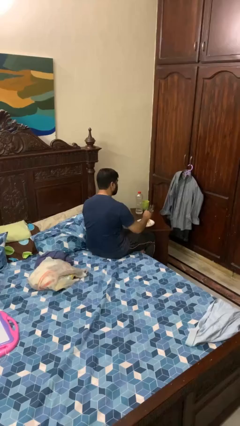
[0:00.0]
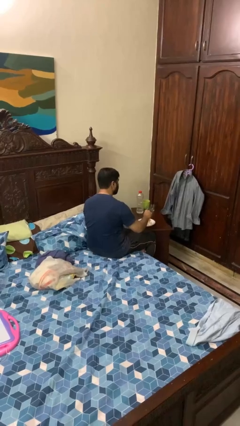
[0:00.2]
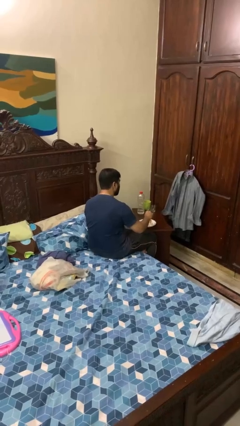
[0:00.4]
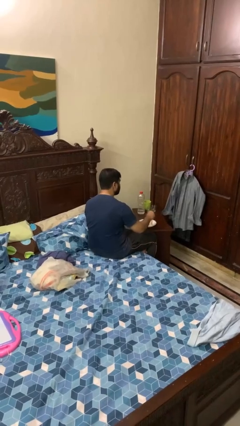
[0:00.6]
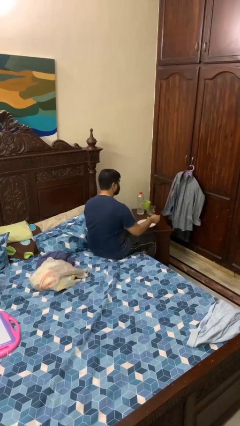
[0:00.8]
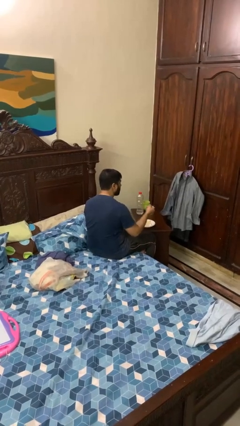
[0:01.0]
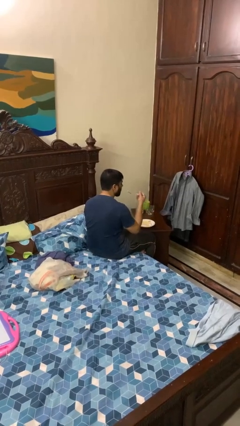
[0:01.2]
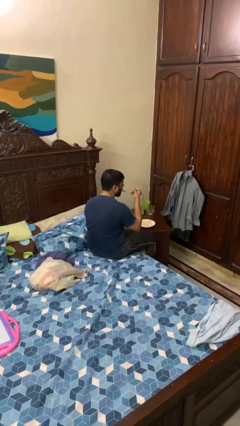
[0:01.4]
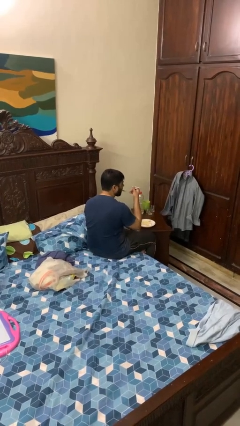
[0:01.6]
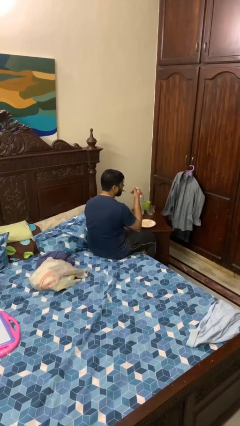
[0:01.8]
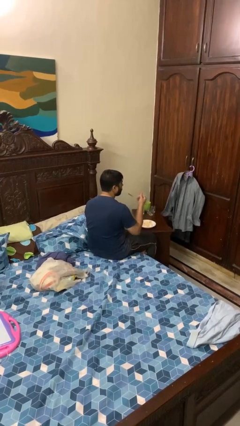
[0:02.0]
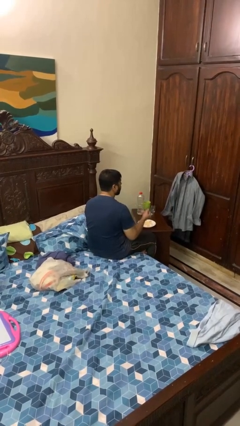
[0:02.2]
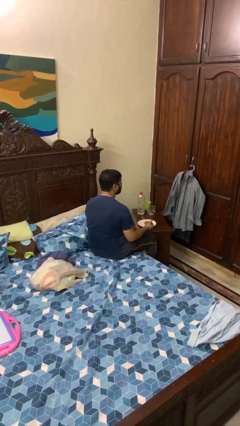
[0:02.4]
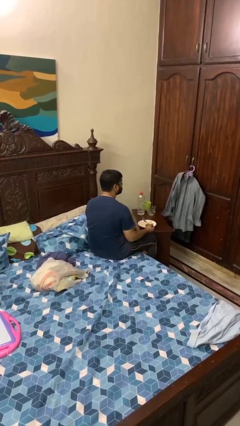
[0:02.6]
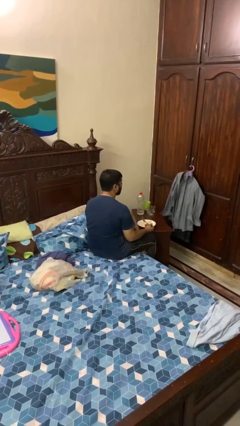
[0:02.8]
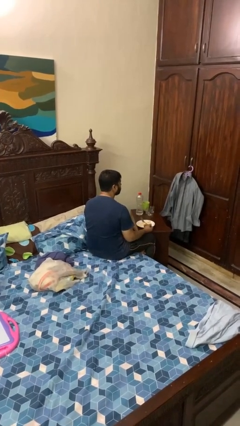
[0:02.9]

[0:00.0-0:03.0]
person eats with utensil

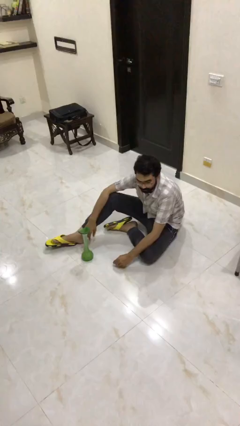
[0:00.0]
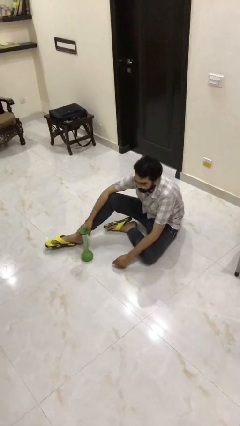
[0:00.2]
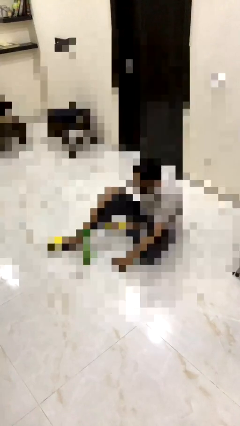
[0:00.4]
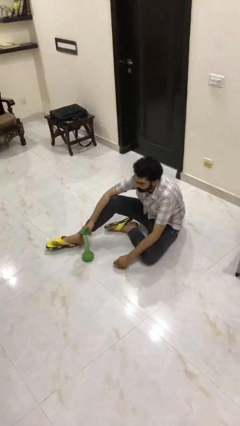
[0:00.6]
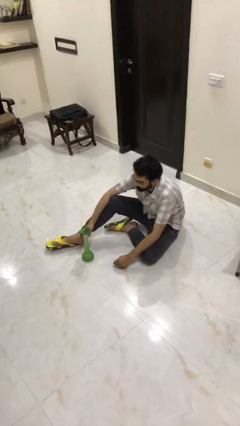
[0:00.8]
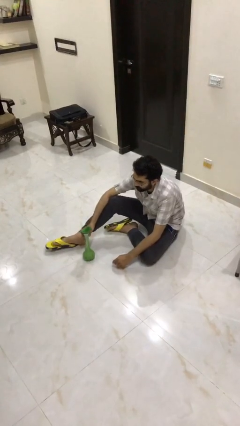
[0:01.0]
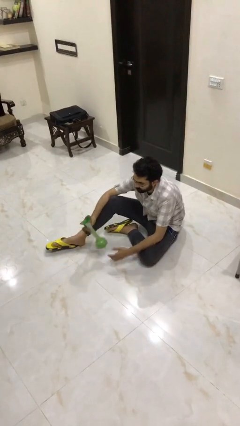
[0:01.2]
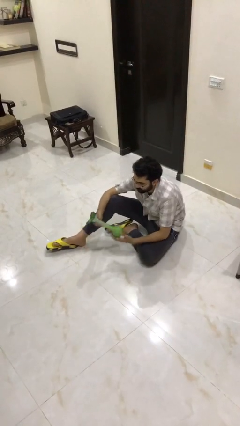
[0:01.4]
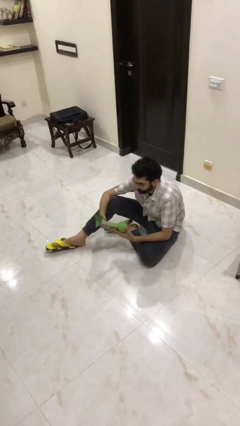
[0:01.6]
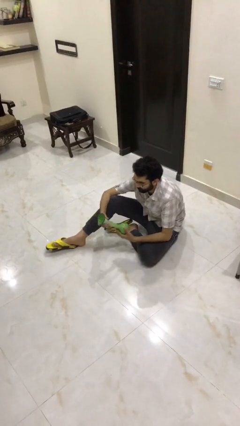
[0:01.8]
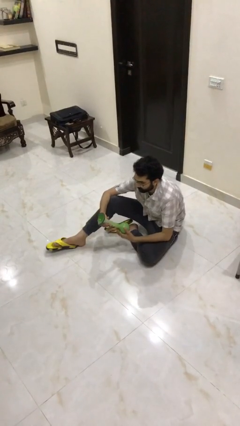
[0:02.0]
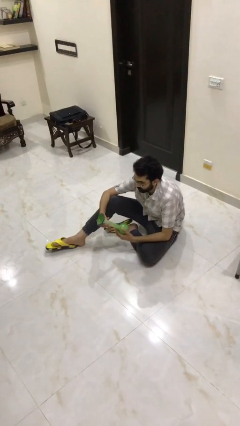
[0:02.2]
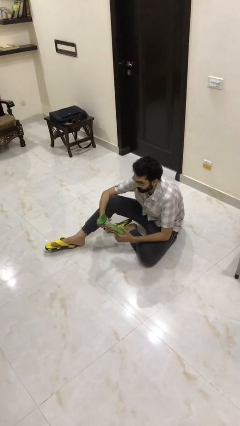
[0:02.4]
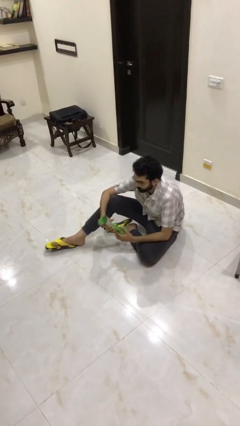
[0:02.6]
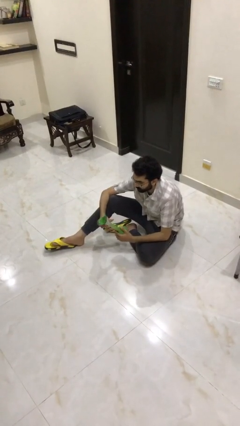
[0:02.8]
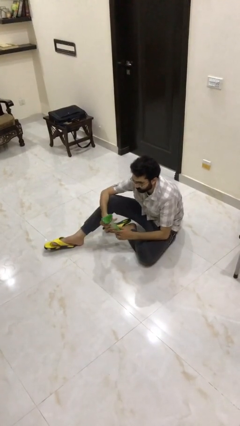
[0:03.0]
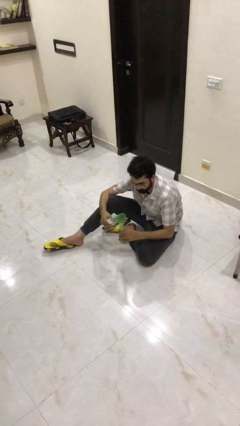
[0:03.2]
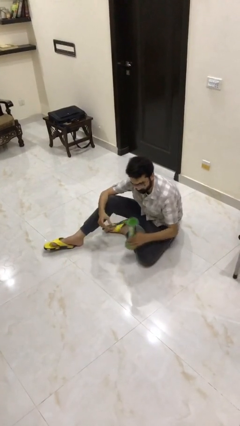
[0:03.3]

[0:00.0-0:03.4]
person picks up object from floor

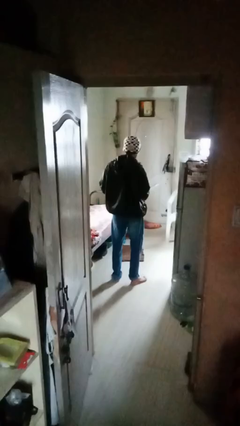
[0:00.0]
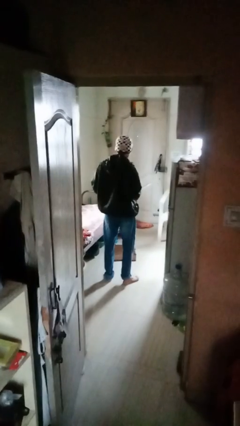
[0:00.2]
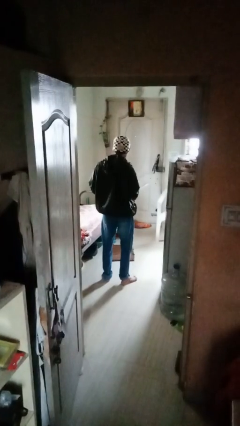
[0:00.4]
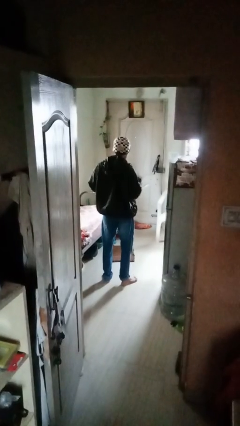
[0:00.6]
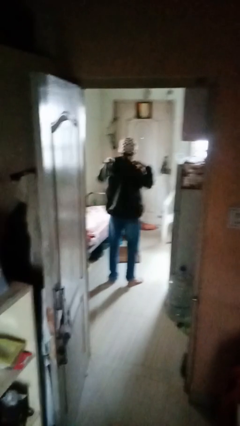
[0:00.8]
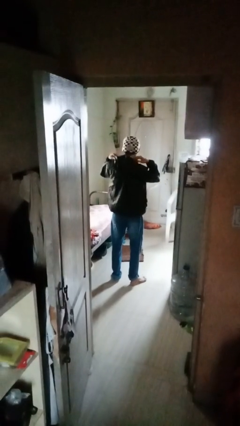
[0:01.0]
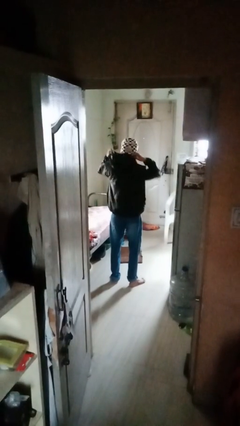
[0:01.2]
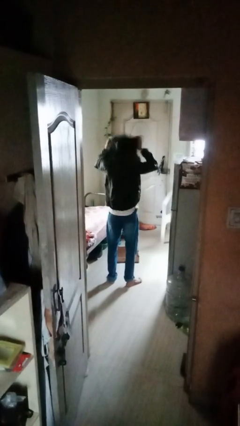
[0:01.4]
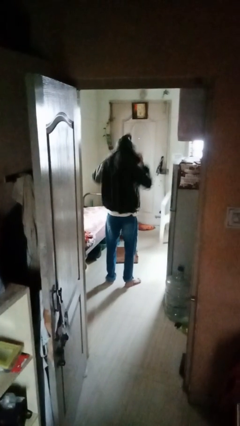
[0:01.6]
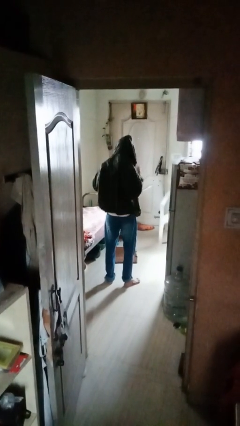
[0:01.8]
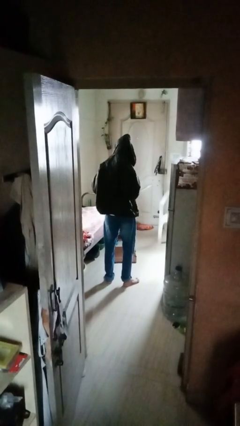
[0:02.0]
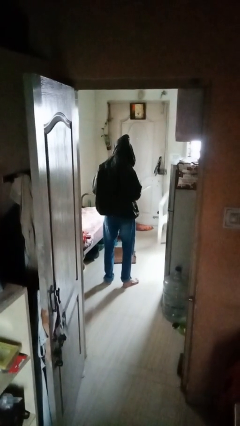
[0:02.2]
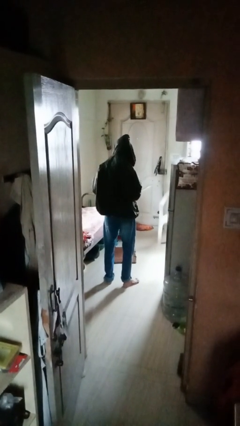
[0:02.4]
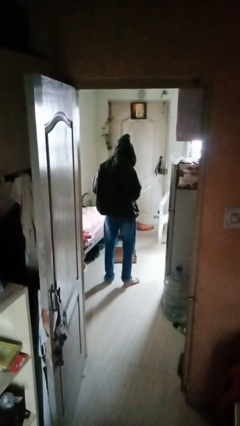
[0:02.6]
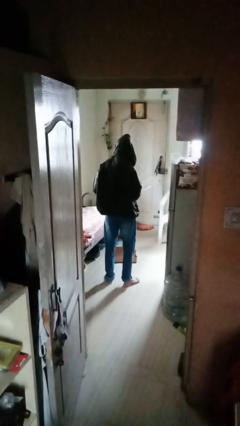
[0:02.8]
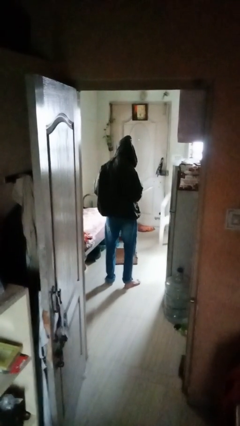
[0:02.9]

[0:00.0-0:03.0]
person puts on hoodie

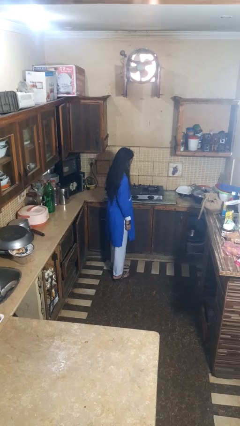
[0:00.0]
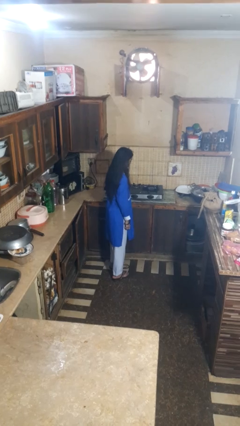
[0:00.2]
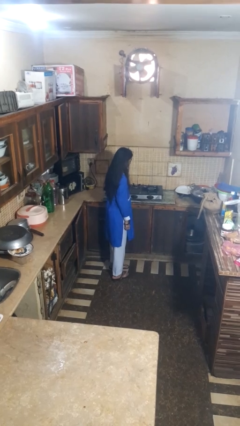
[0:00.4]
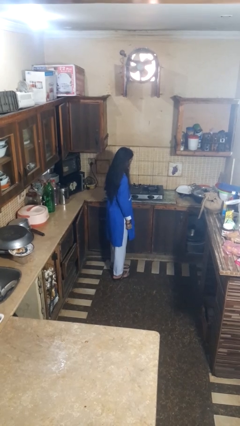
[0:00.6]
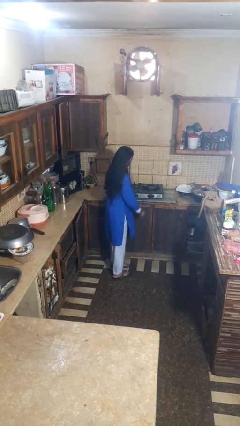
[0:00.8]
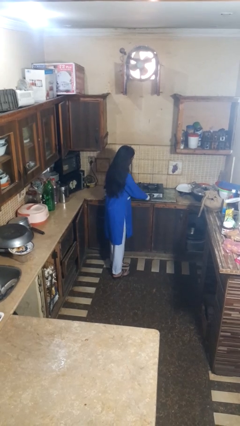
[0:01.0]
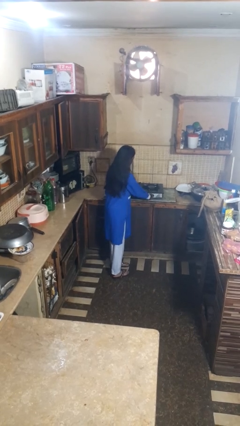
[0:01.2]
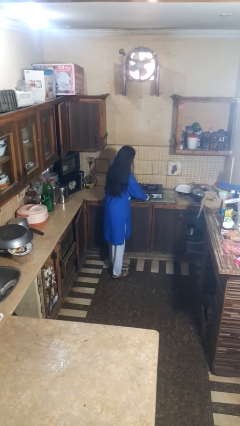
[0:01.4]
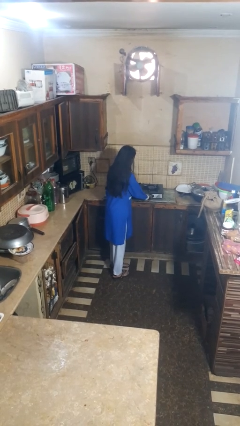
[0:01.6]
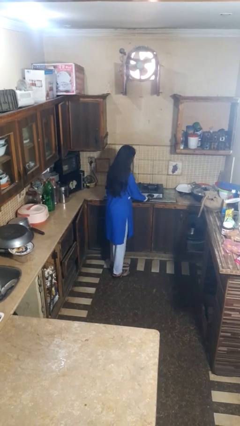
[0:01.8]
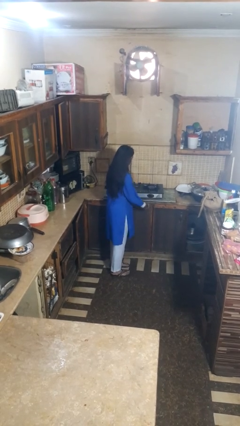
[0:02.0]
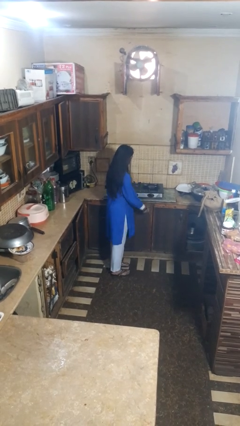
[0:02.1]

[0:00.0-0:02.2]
person turns off stovetop

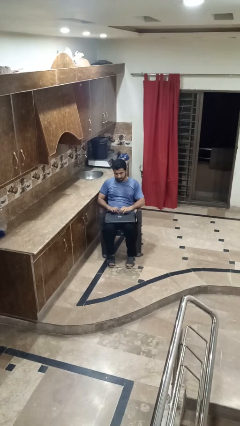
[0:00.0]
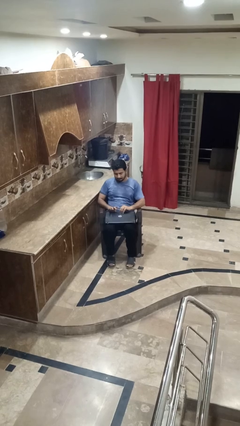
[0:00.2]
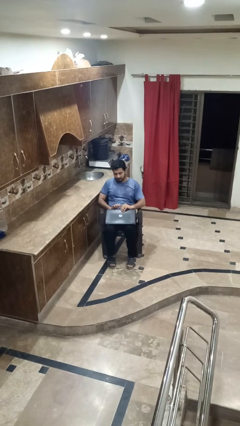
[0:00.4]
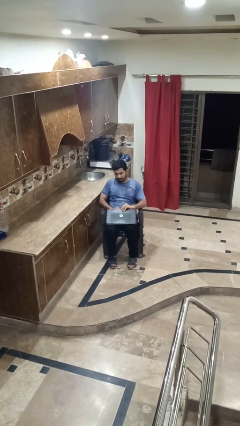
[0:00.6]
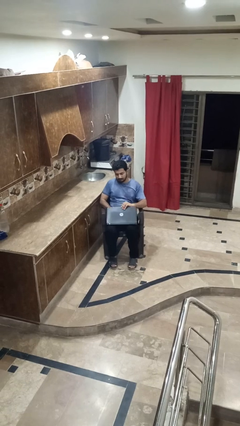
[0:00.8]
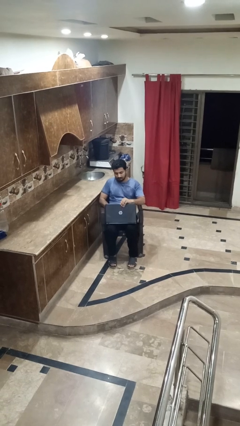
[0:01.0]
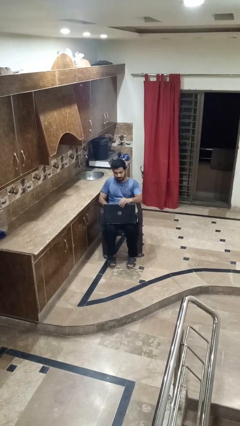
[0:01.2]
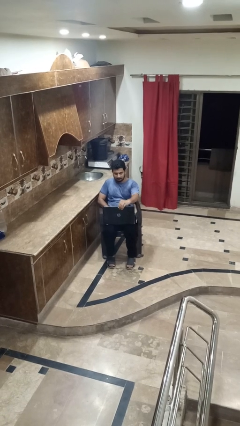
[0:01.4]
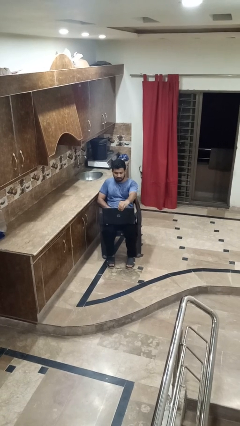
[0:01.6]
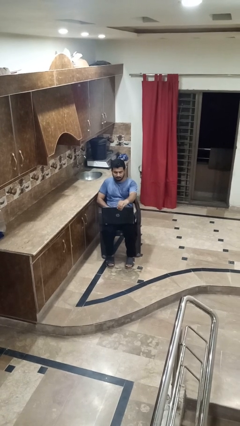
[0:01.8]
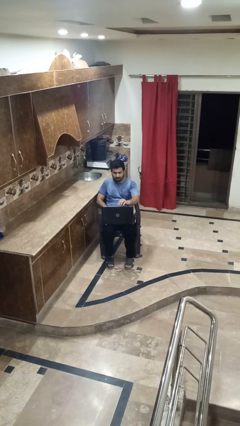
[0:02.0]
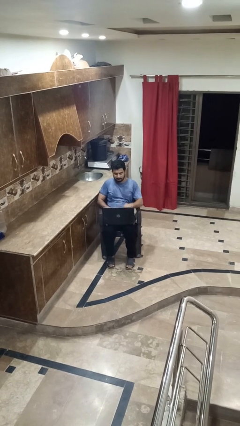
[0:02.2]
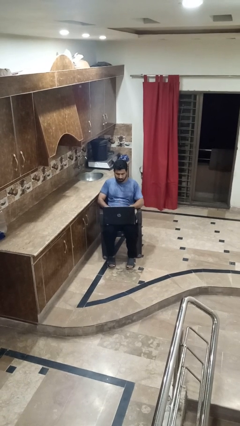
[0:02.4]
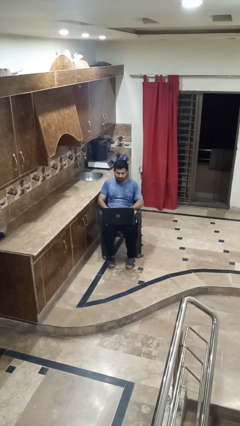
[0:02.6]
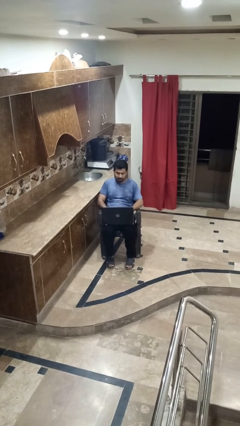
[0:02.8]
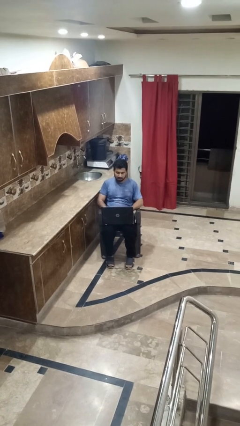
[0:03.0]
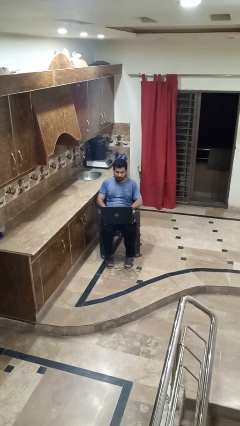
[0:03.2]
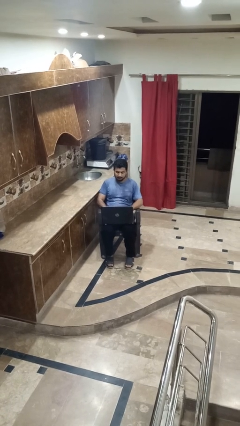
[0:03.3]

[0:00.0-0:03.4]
person opens laptop

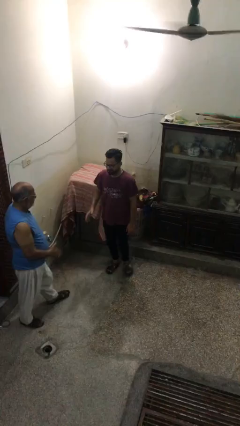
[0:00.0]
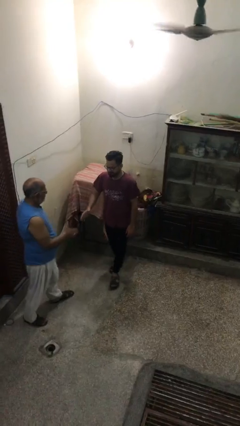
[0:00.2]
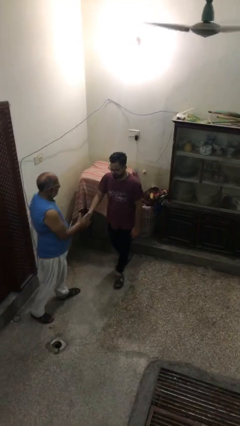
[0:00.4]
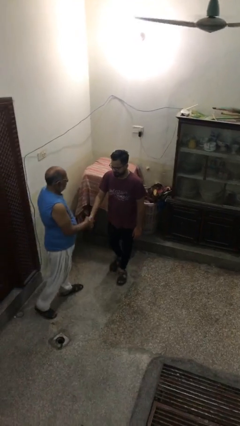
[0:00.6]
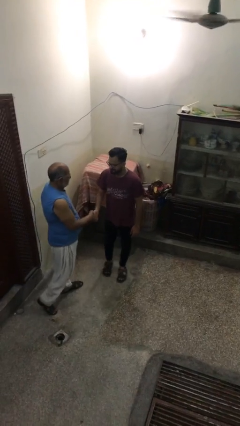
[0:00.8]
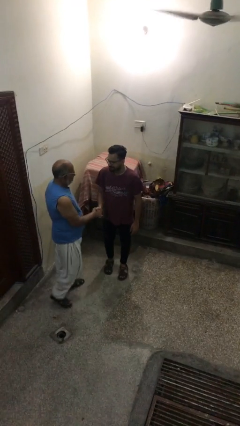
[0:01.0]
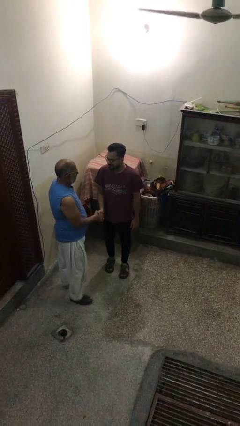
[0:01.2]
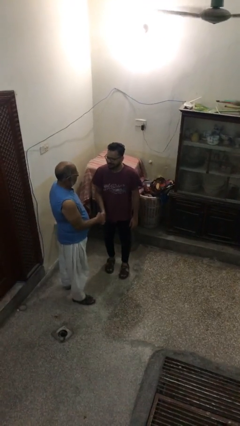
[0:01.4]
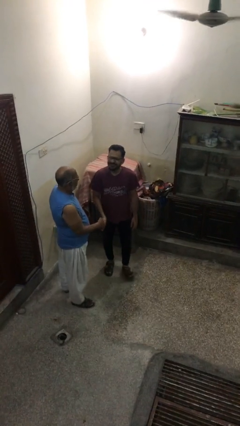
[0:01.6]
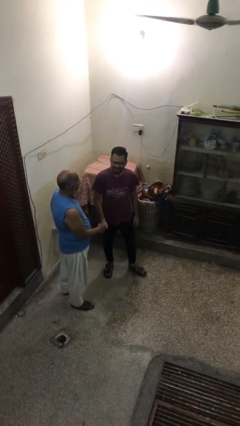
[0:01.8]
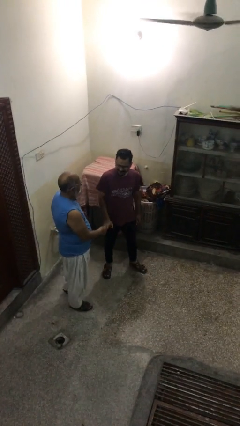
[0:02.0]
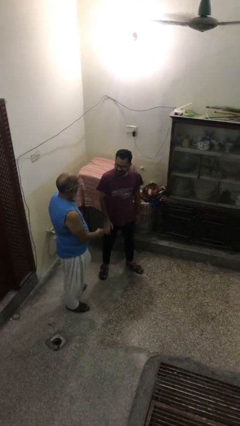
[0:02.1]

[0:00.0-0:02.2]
person shakes hand
